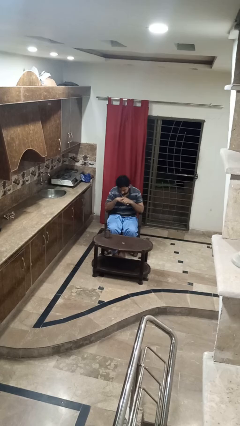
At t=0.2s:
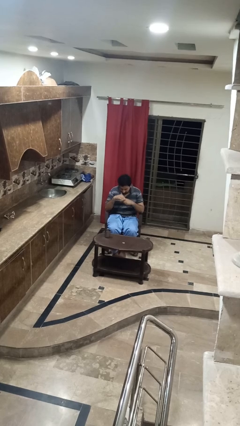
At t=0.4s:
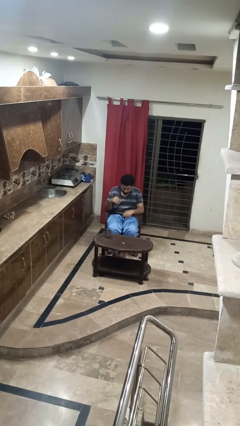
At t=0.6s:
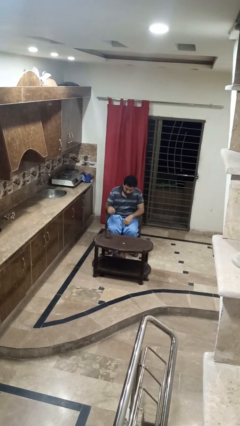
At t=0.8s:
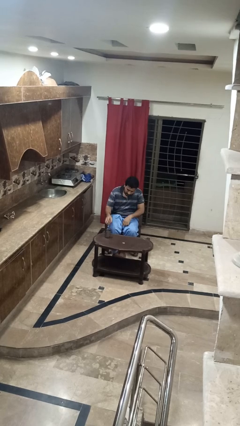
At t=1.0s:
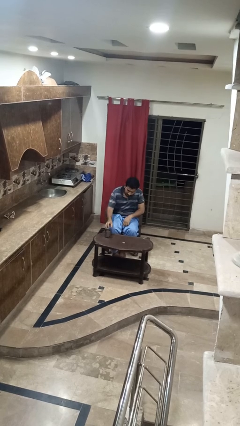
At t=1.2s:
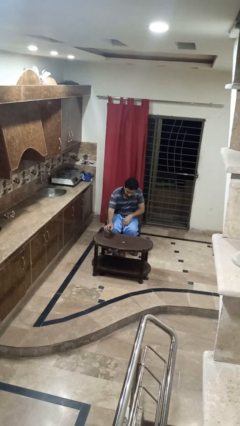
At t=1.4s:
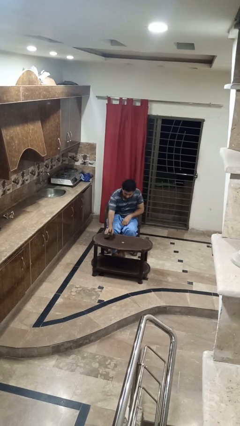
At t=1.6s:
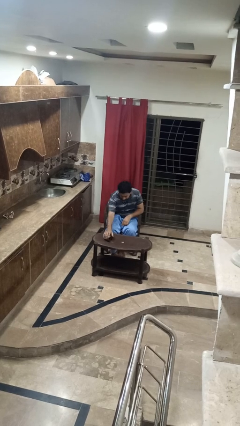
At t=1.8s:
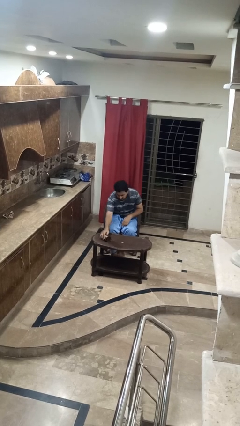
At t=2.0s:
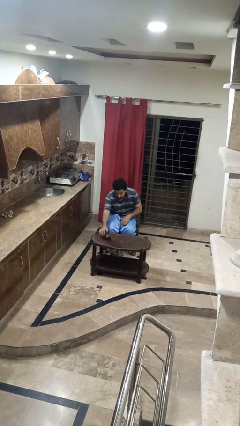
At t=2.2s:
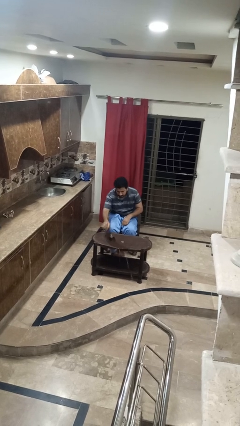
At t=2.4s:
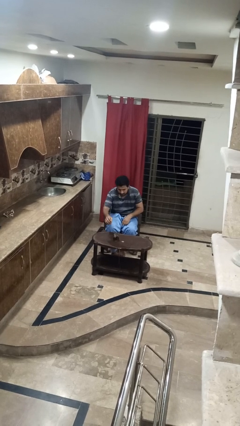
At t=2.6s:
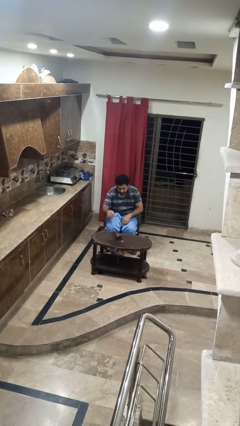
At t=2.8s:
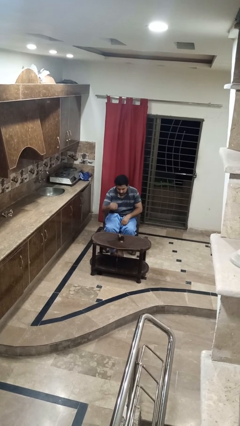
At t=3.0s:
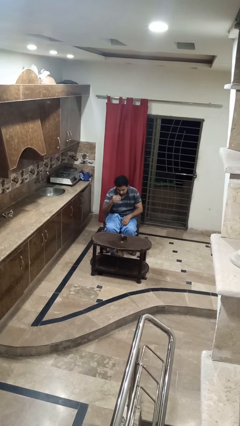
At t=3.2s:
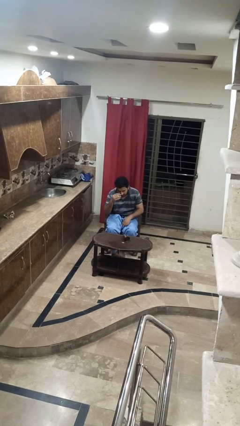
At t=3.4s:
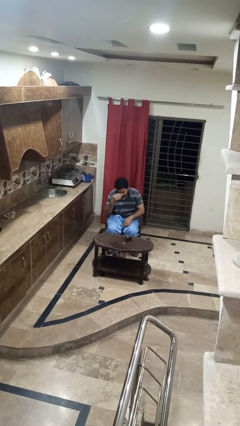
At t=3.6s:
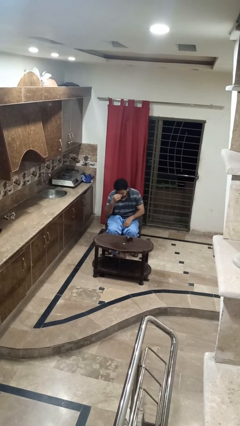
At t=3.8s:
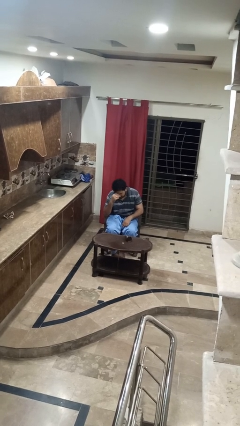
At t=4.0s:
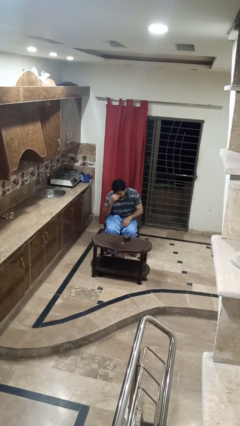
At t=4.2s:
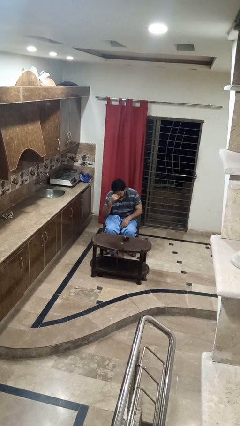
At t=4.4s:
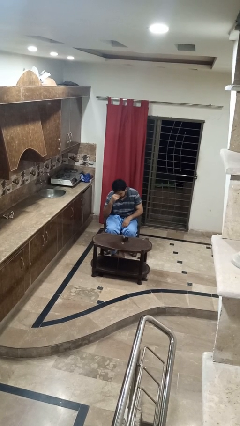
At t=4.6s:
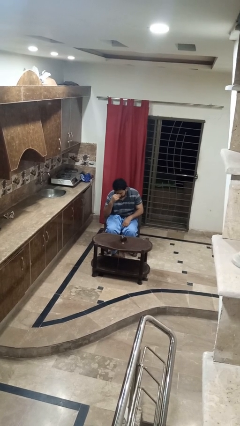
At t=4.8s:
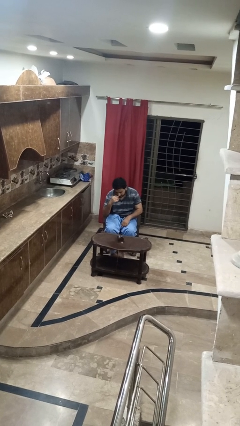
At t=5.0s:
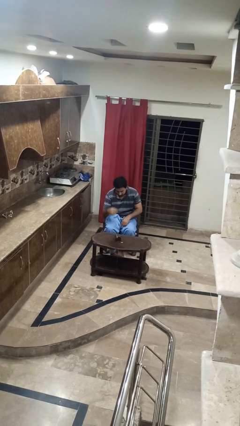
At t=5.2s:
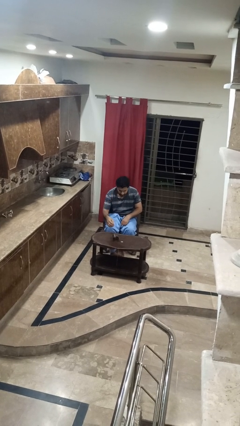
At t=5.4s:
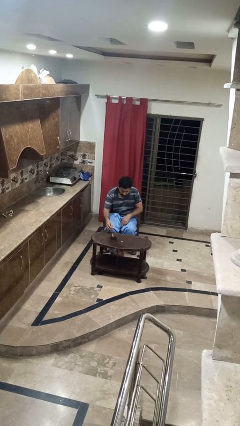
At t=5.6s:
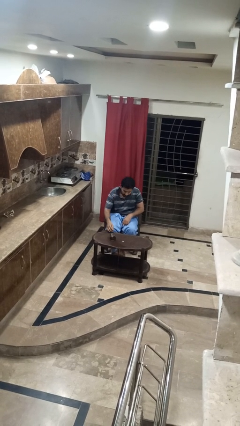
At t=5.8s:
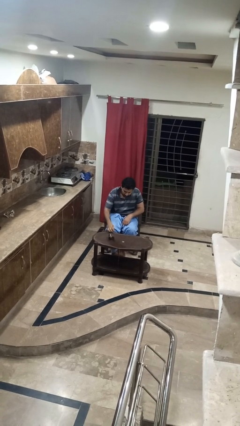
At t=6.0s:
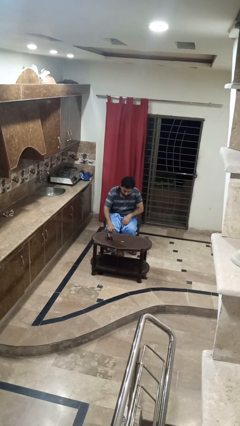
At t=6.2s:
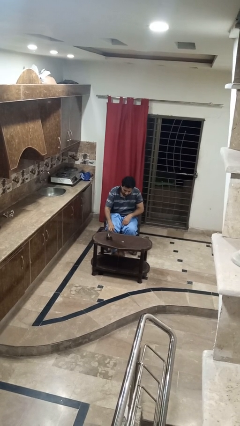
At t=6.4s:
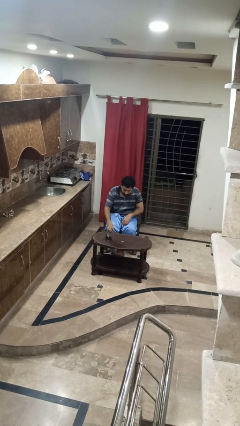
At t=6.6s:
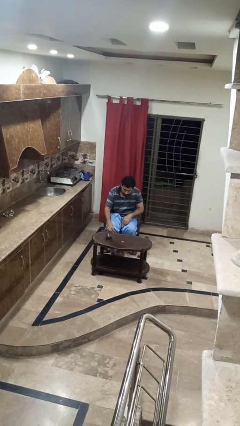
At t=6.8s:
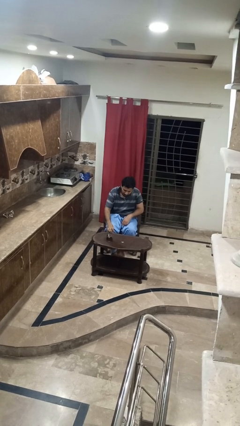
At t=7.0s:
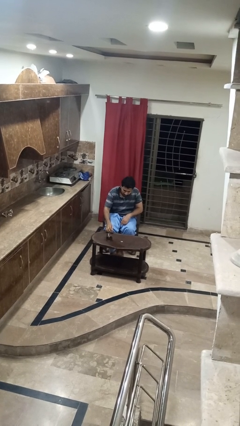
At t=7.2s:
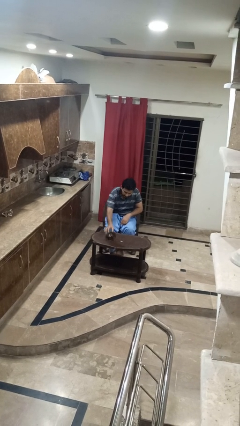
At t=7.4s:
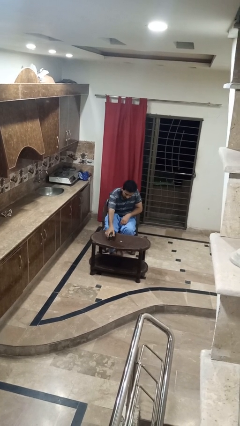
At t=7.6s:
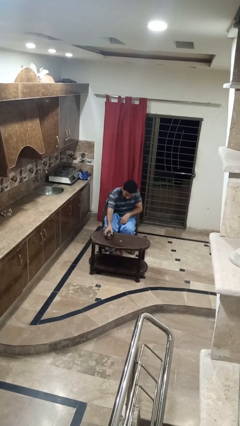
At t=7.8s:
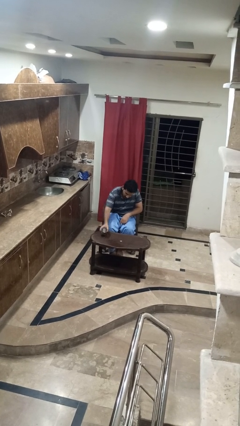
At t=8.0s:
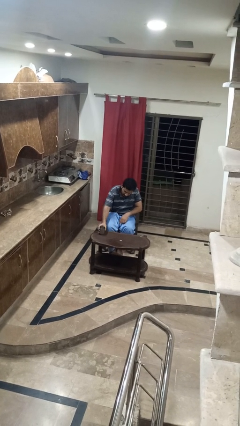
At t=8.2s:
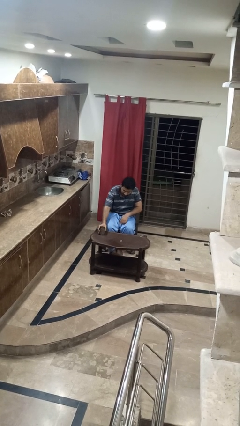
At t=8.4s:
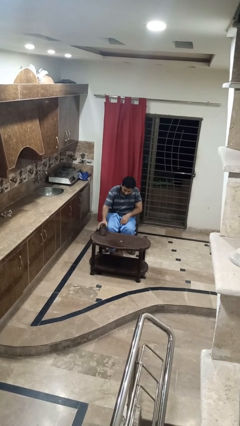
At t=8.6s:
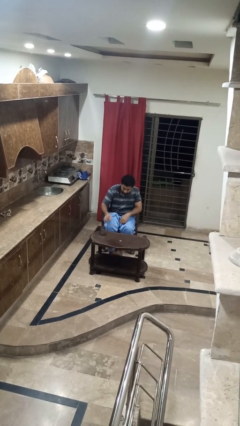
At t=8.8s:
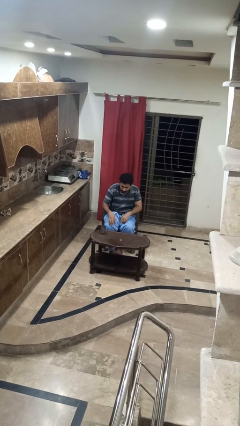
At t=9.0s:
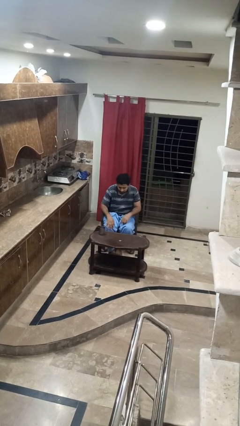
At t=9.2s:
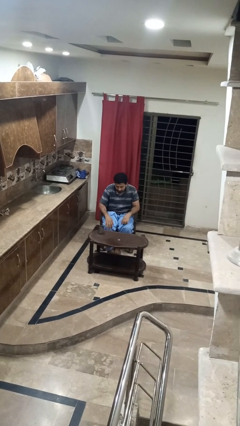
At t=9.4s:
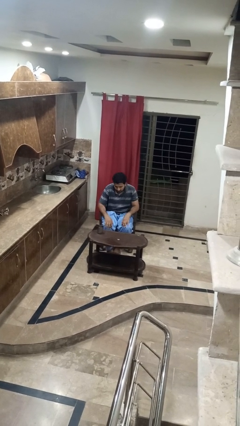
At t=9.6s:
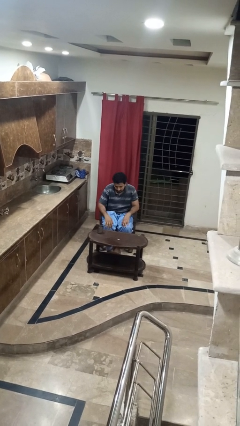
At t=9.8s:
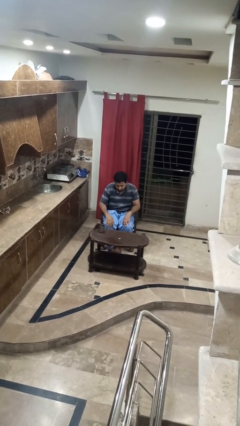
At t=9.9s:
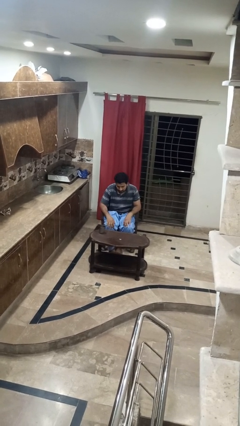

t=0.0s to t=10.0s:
person sets upright glass

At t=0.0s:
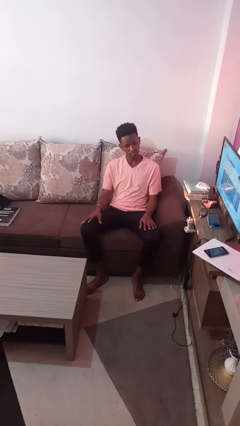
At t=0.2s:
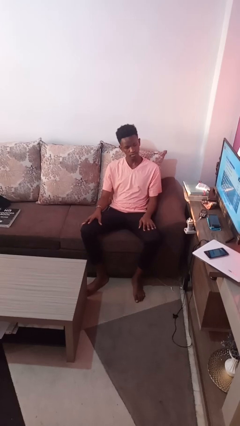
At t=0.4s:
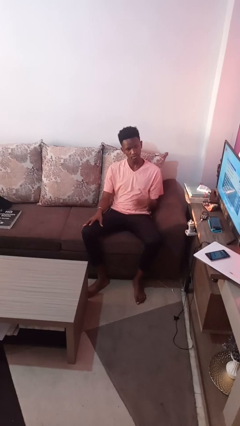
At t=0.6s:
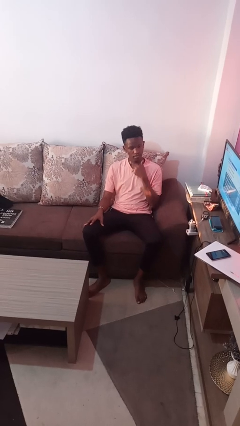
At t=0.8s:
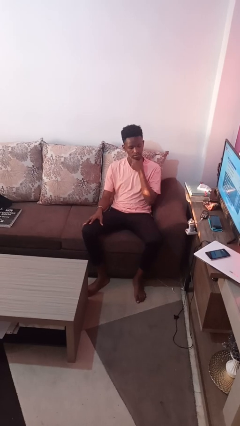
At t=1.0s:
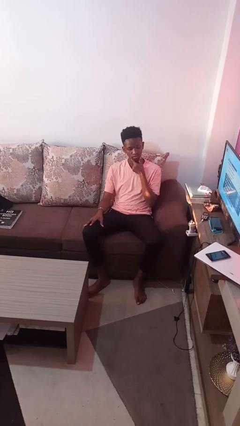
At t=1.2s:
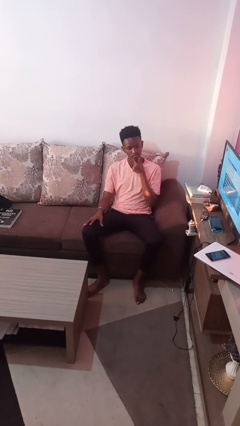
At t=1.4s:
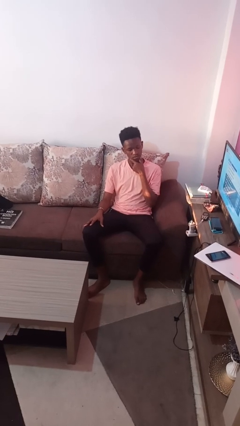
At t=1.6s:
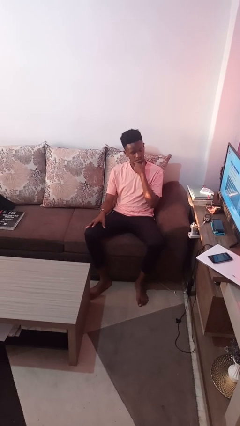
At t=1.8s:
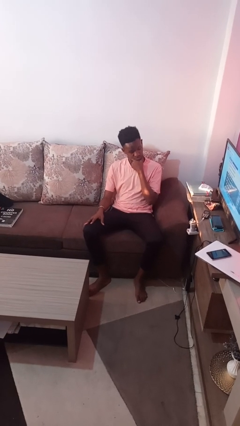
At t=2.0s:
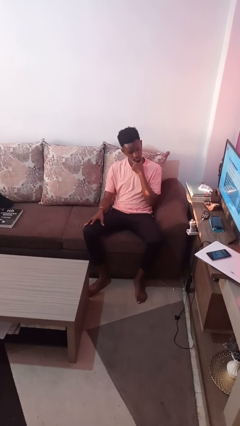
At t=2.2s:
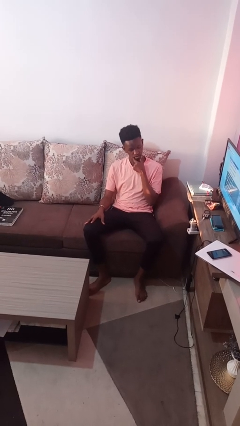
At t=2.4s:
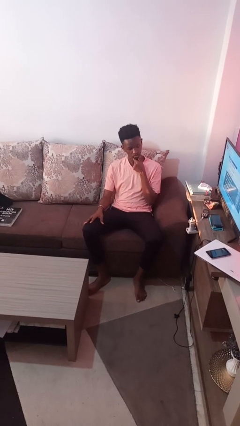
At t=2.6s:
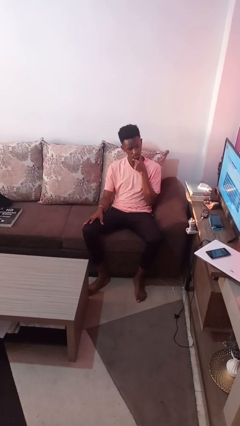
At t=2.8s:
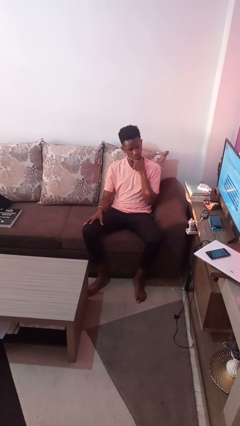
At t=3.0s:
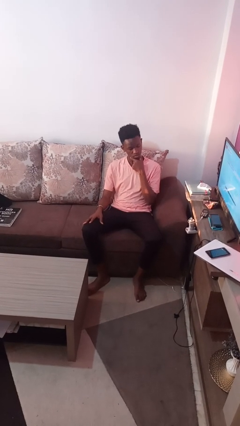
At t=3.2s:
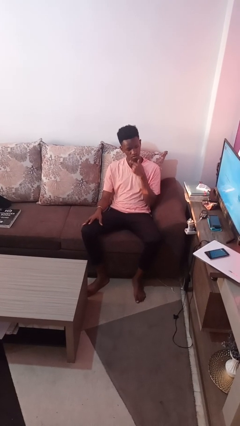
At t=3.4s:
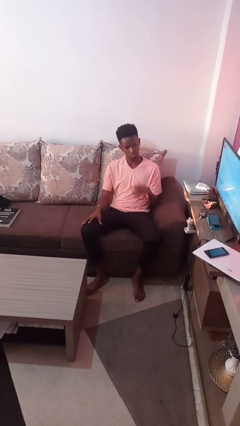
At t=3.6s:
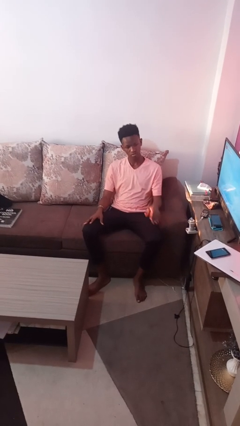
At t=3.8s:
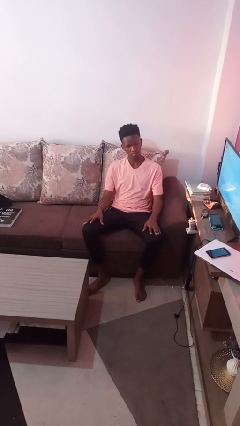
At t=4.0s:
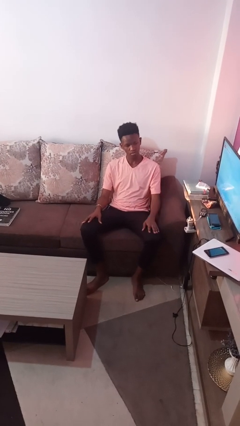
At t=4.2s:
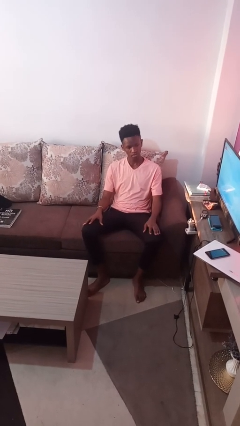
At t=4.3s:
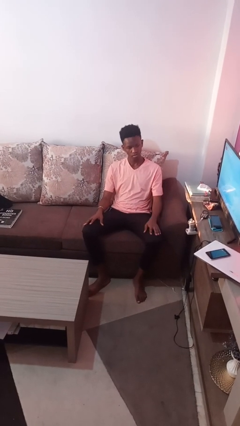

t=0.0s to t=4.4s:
person strokes chin

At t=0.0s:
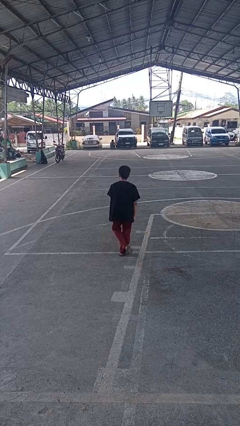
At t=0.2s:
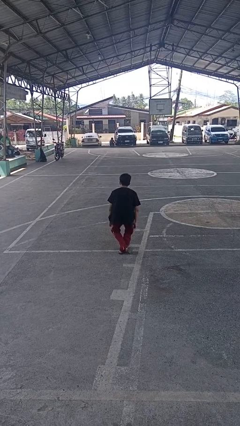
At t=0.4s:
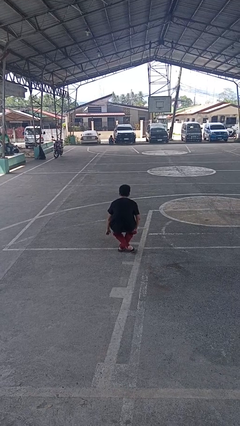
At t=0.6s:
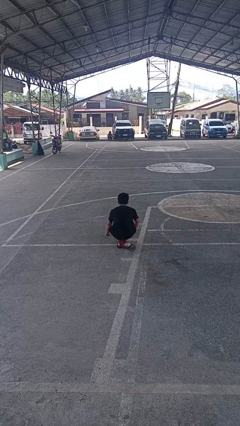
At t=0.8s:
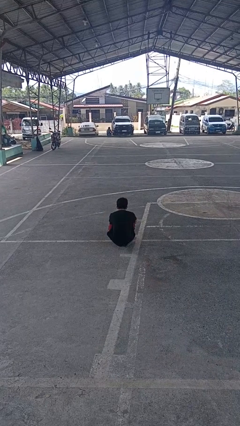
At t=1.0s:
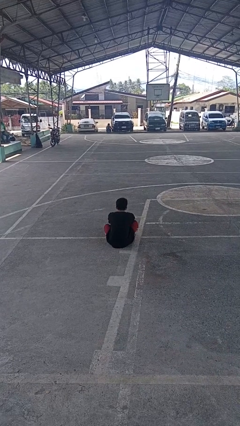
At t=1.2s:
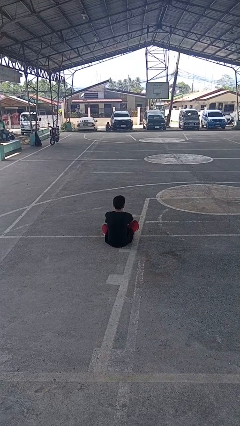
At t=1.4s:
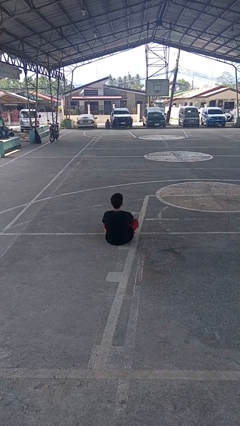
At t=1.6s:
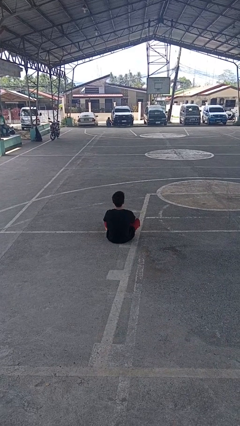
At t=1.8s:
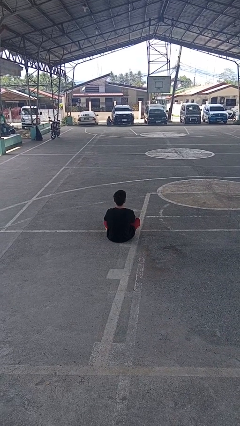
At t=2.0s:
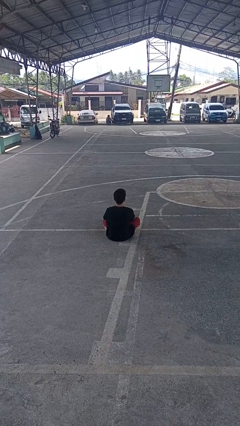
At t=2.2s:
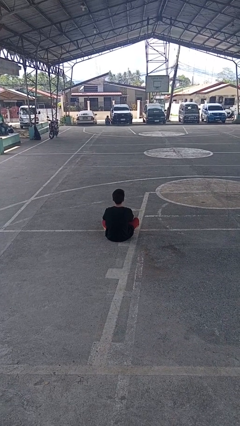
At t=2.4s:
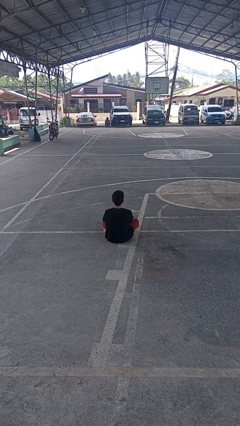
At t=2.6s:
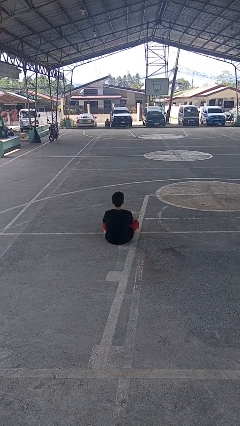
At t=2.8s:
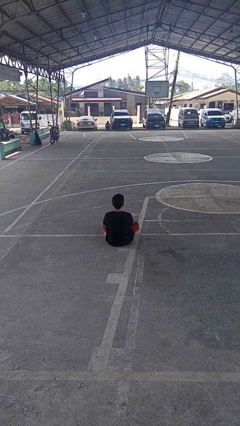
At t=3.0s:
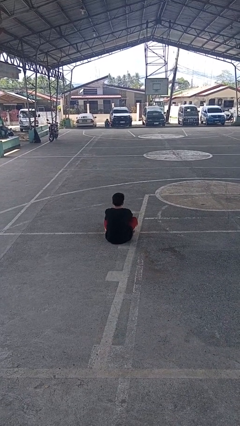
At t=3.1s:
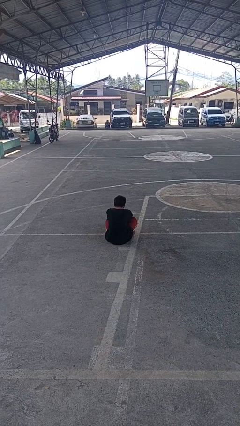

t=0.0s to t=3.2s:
person sits crisscross

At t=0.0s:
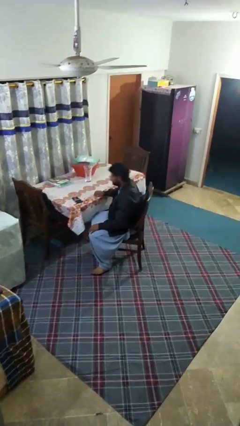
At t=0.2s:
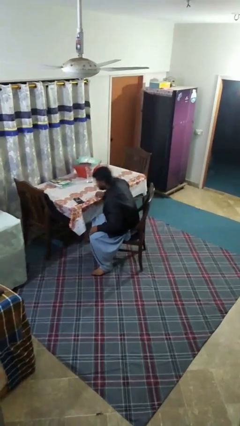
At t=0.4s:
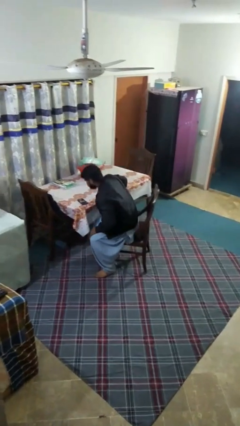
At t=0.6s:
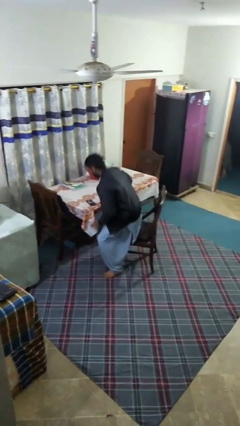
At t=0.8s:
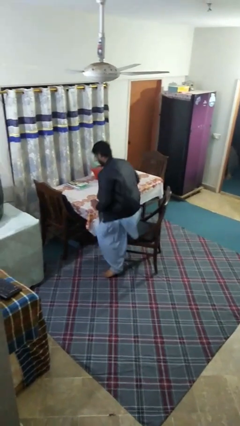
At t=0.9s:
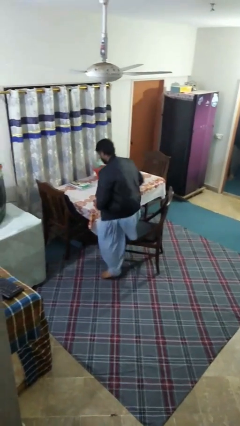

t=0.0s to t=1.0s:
person stands up
